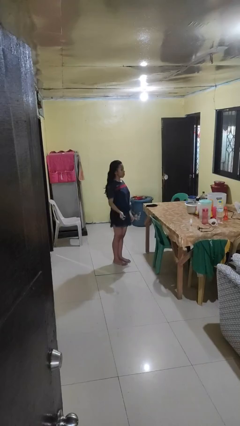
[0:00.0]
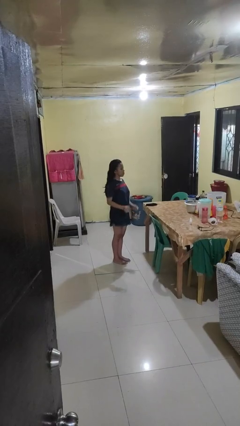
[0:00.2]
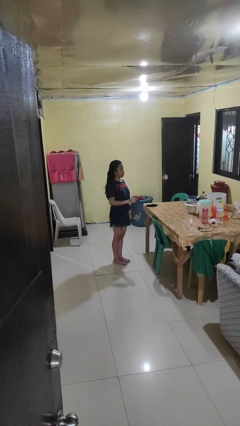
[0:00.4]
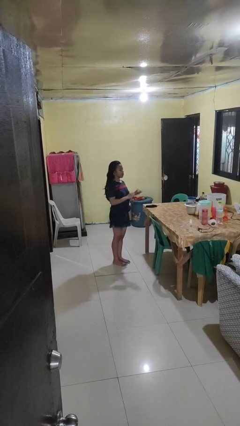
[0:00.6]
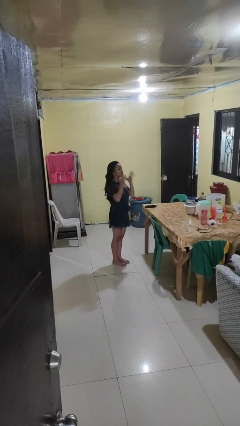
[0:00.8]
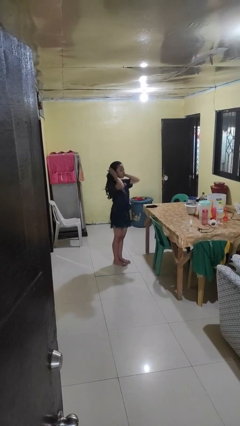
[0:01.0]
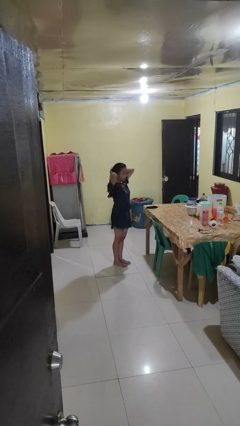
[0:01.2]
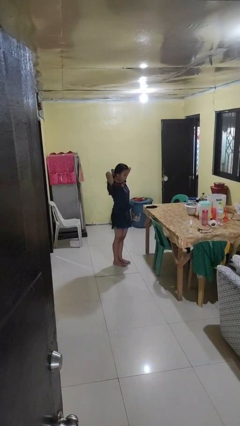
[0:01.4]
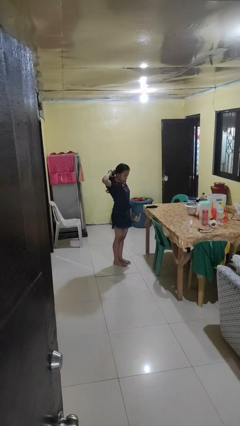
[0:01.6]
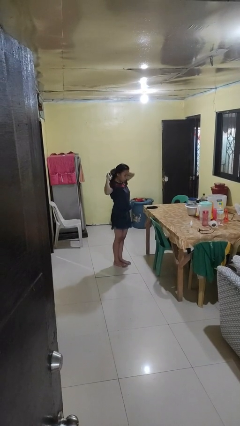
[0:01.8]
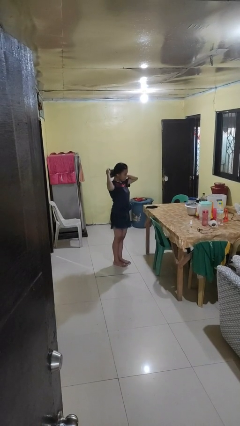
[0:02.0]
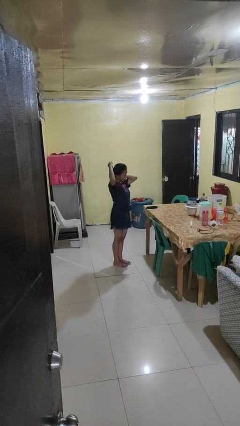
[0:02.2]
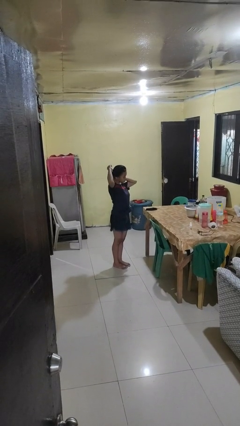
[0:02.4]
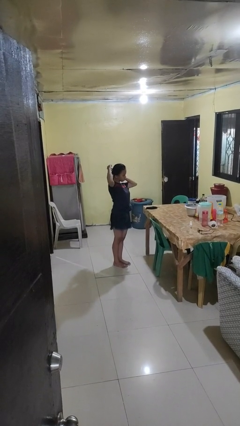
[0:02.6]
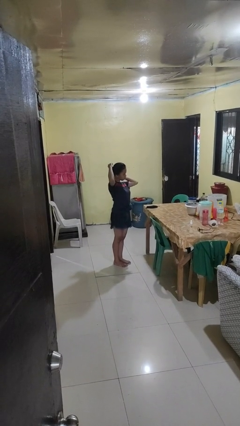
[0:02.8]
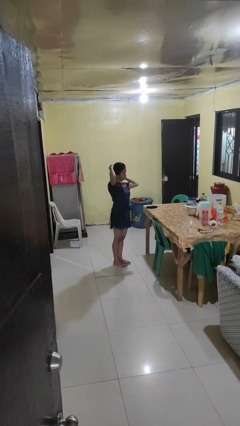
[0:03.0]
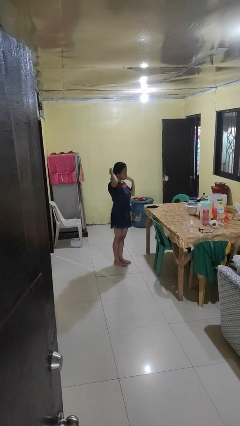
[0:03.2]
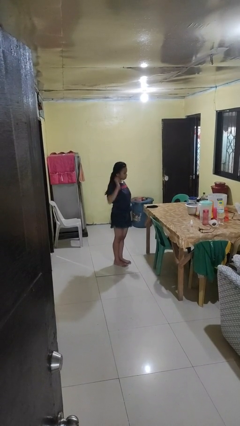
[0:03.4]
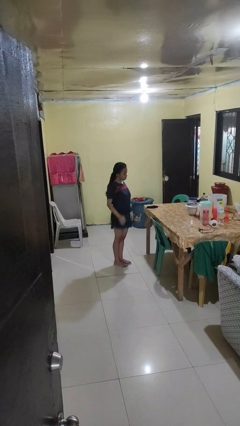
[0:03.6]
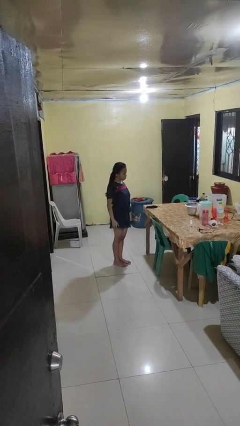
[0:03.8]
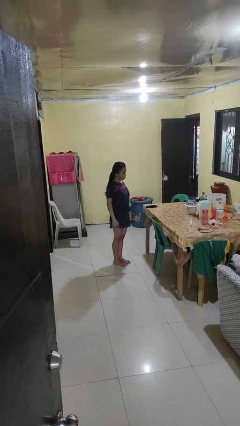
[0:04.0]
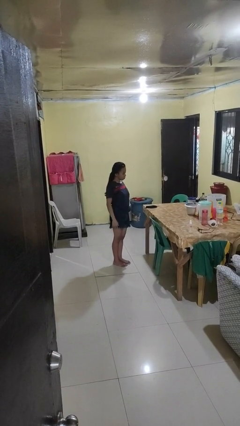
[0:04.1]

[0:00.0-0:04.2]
person puts hair in ponytail

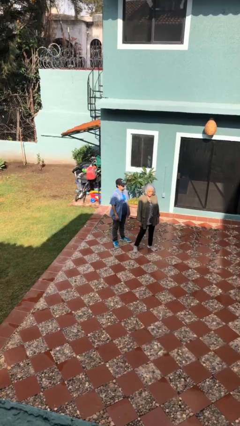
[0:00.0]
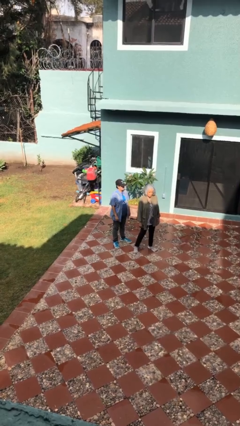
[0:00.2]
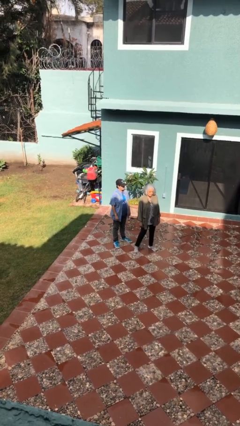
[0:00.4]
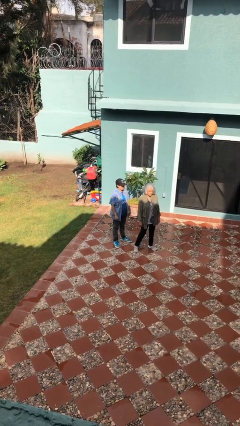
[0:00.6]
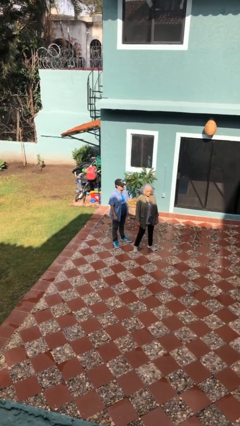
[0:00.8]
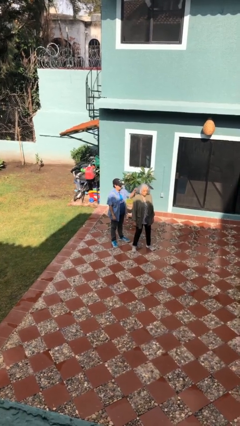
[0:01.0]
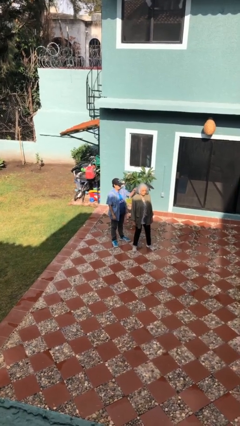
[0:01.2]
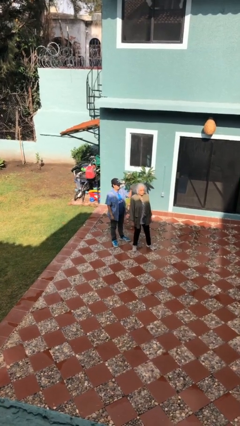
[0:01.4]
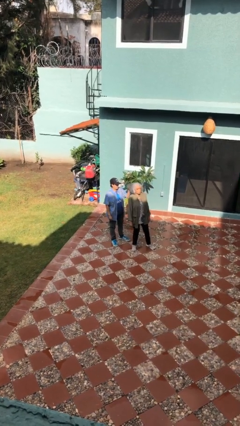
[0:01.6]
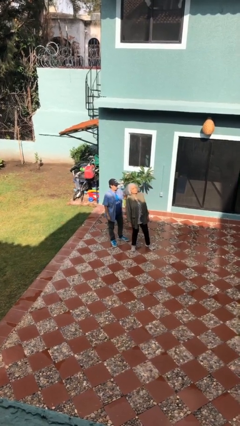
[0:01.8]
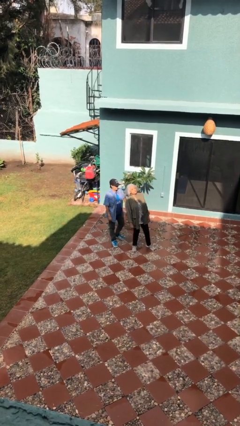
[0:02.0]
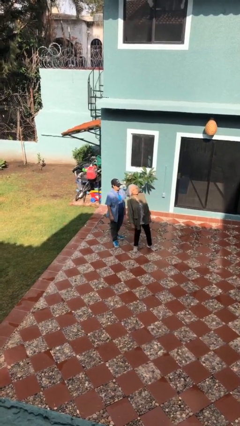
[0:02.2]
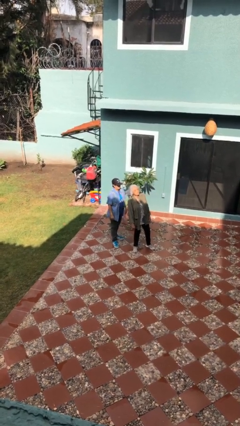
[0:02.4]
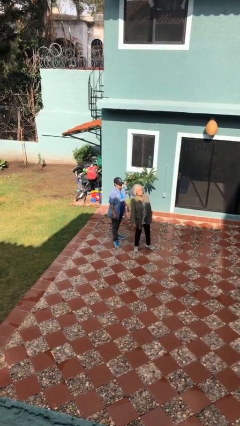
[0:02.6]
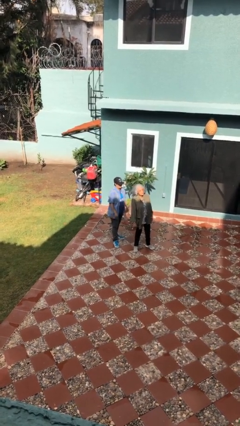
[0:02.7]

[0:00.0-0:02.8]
person grabs person by hair

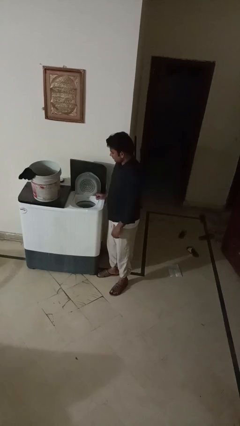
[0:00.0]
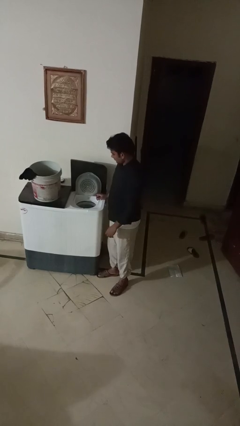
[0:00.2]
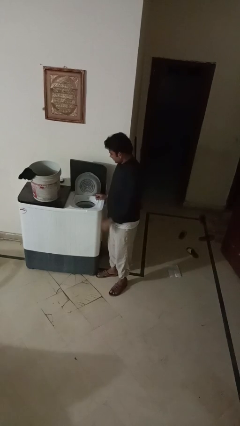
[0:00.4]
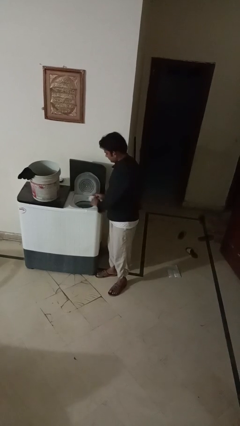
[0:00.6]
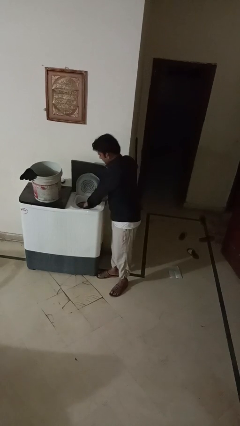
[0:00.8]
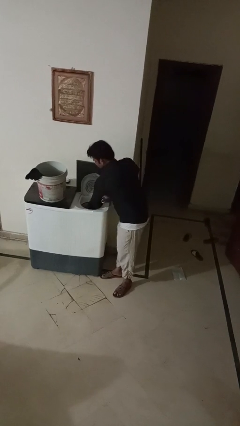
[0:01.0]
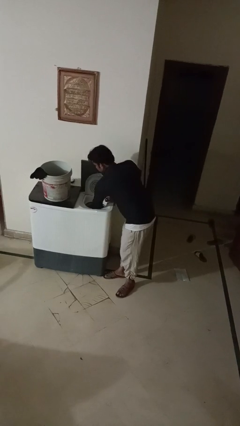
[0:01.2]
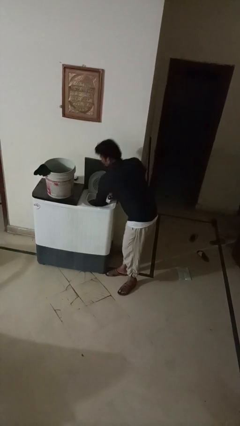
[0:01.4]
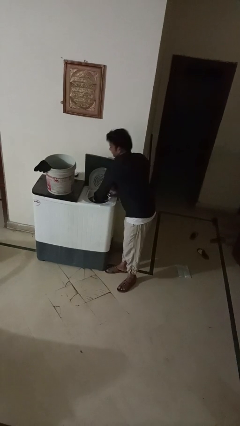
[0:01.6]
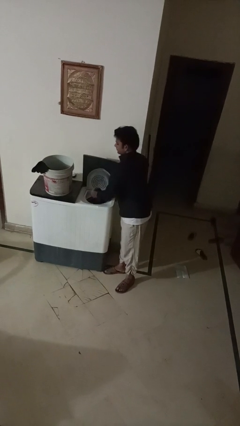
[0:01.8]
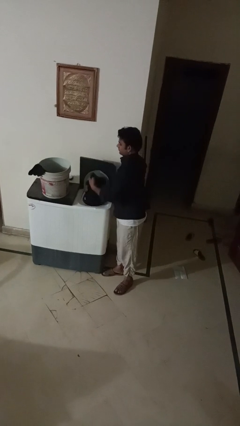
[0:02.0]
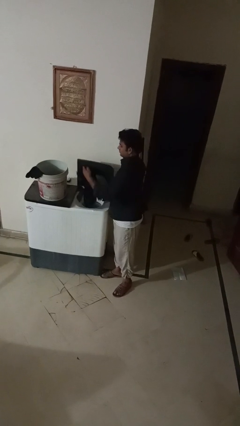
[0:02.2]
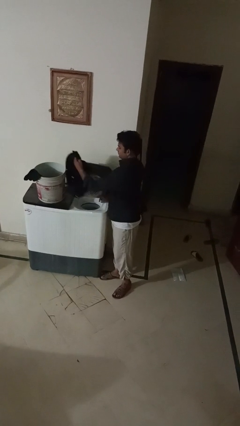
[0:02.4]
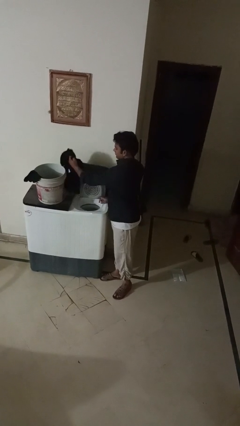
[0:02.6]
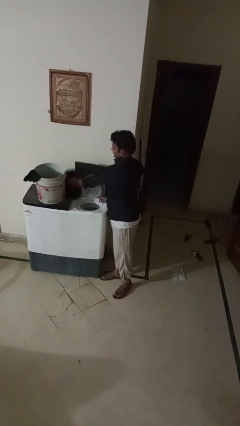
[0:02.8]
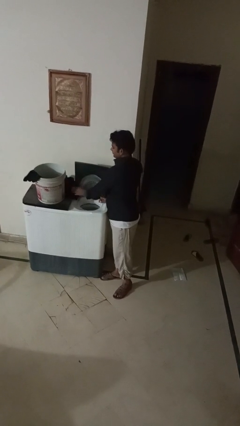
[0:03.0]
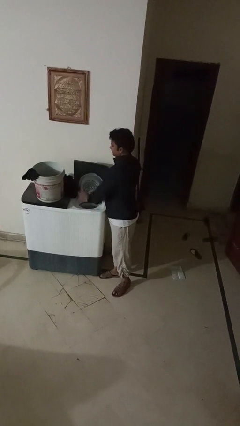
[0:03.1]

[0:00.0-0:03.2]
person unloads dryer

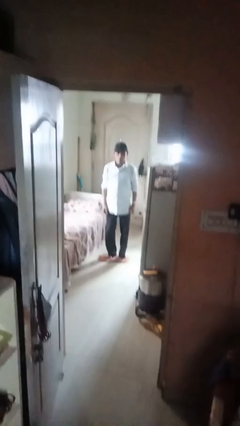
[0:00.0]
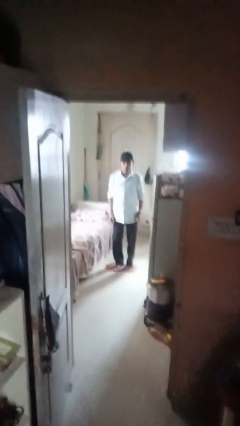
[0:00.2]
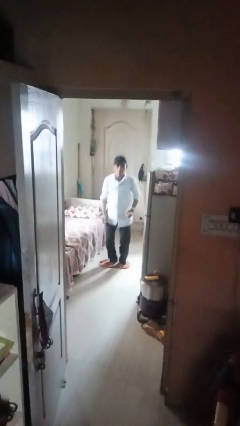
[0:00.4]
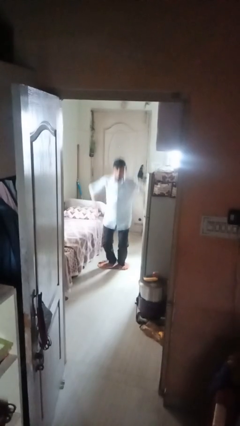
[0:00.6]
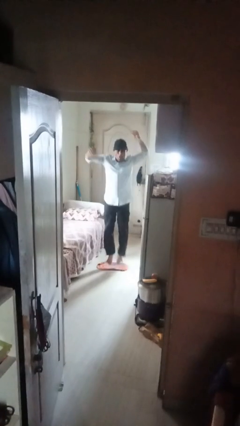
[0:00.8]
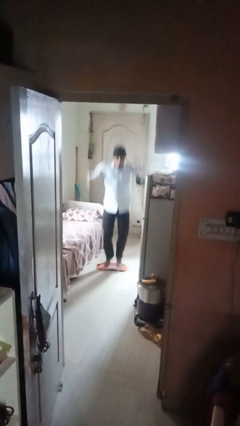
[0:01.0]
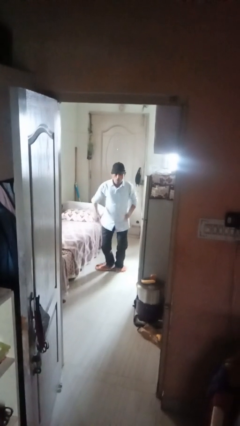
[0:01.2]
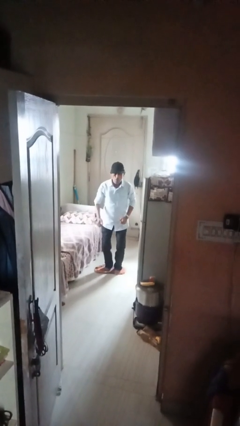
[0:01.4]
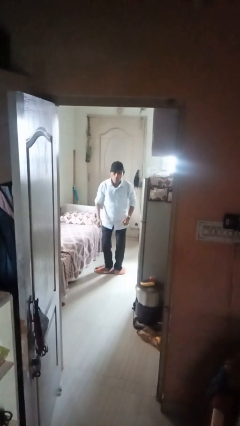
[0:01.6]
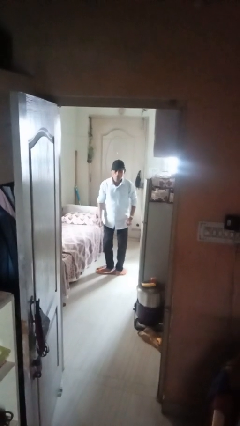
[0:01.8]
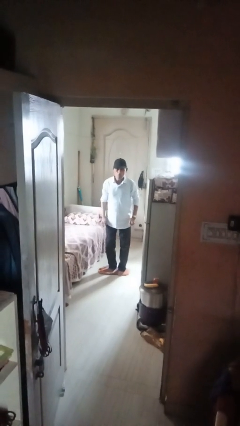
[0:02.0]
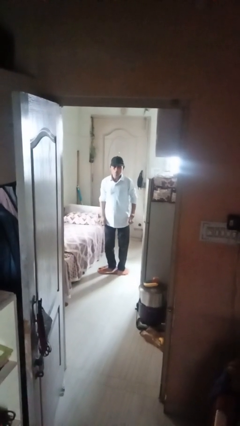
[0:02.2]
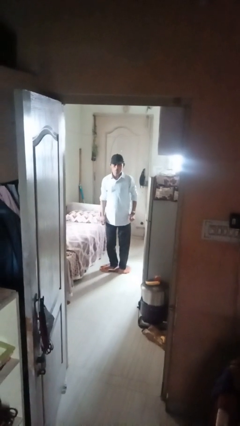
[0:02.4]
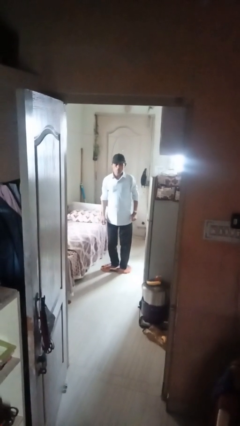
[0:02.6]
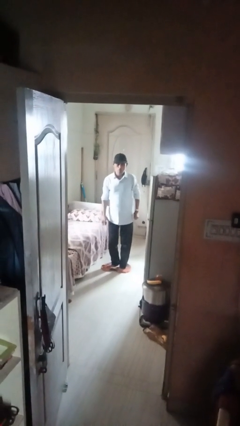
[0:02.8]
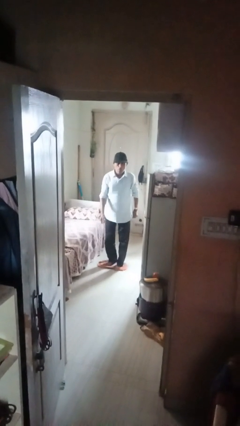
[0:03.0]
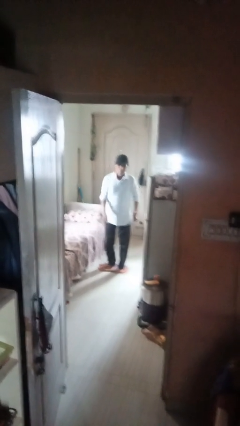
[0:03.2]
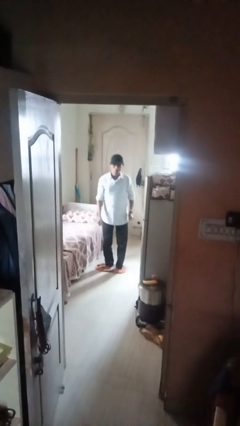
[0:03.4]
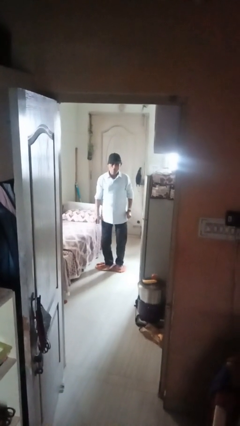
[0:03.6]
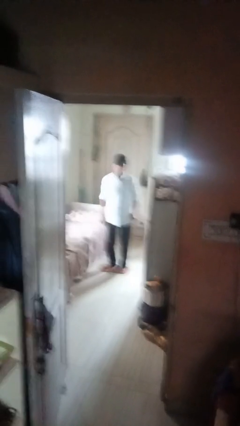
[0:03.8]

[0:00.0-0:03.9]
person jumps

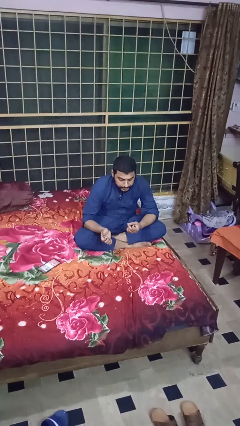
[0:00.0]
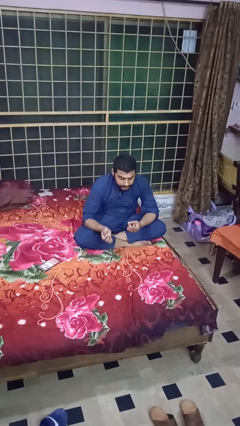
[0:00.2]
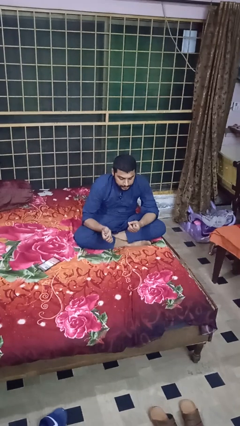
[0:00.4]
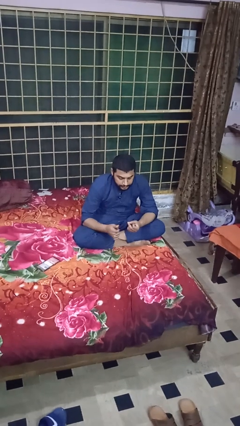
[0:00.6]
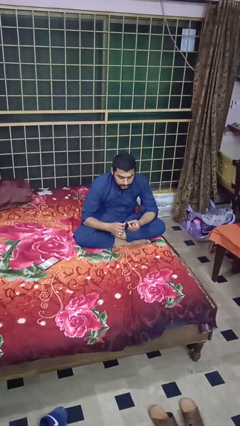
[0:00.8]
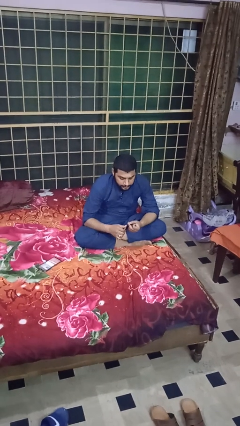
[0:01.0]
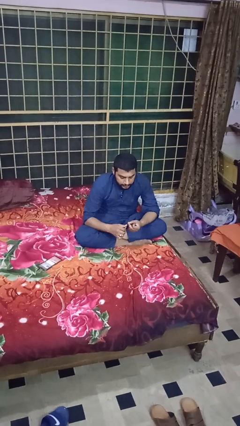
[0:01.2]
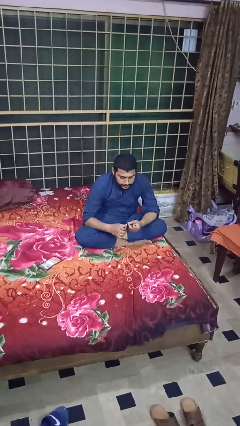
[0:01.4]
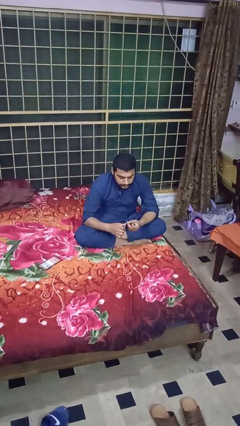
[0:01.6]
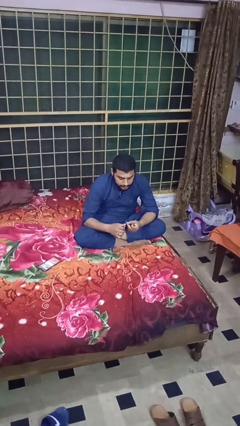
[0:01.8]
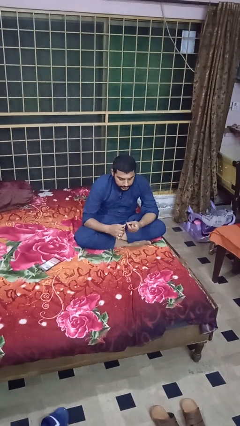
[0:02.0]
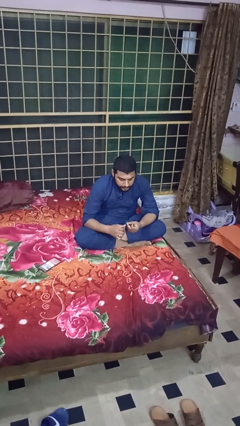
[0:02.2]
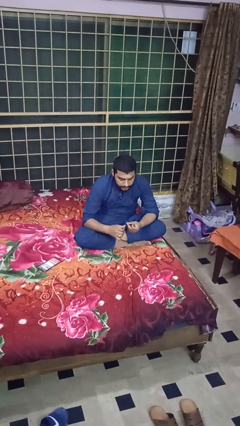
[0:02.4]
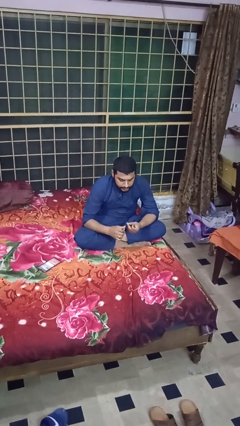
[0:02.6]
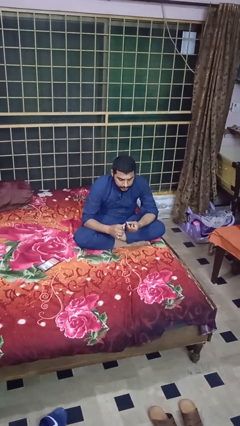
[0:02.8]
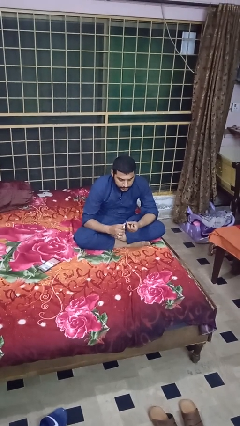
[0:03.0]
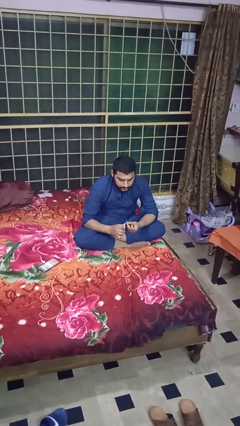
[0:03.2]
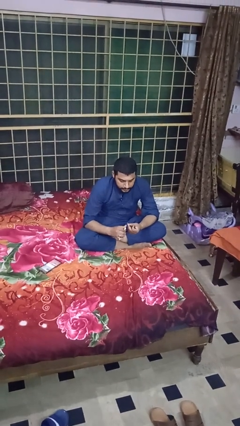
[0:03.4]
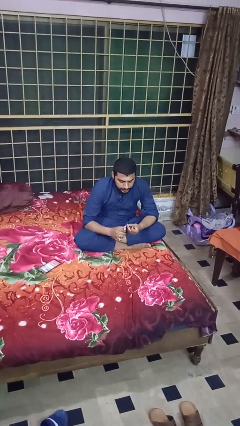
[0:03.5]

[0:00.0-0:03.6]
person files fingernails

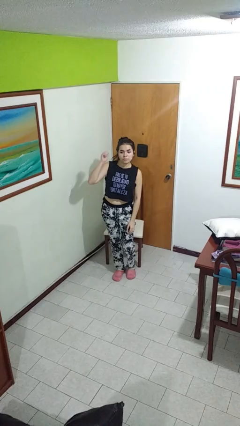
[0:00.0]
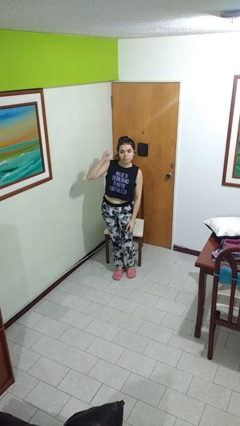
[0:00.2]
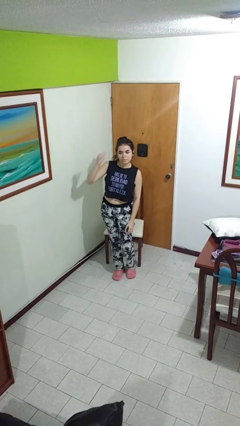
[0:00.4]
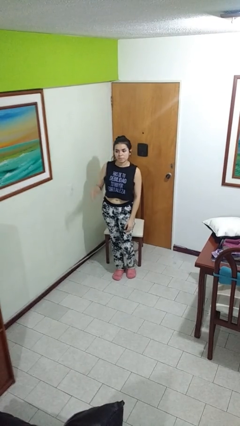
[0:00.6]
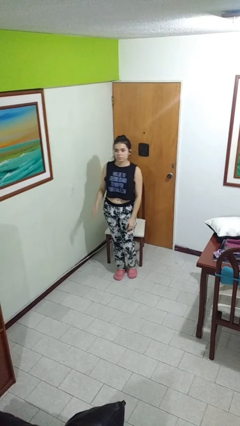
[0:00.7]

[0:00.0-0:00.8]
person gestures behind me
